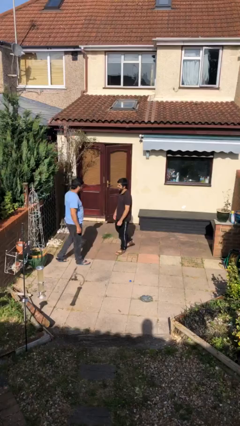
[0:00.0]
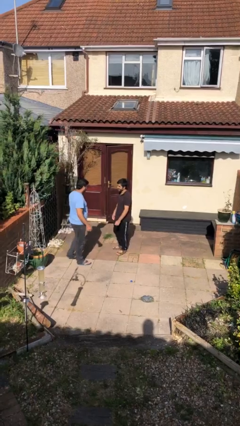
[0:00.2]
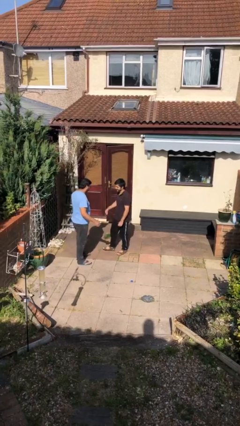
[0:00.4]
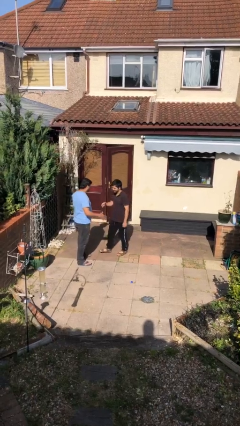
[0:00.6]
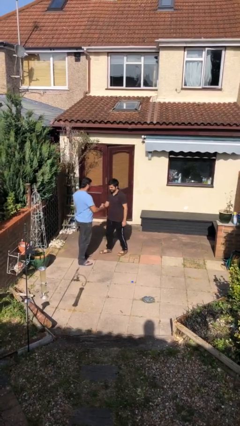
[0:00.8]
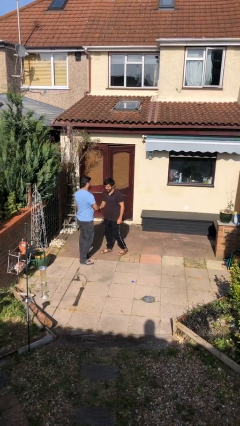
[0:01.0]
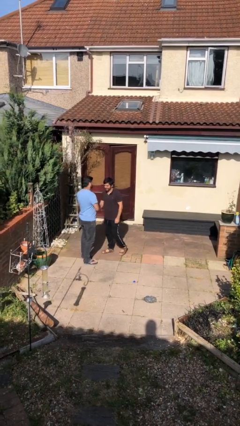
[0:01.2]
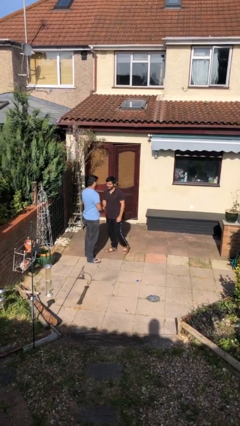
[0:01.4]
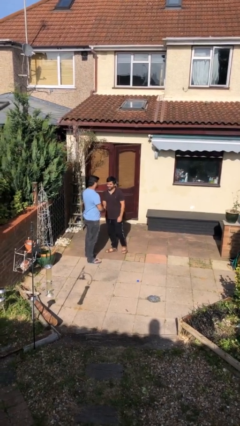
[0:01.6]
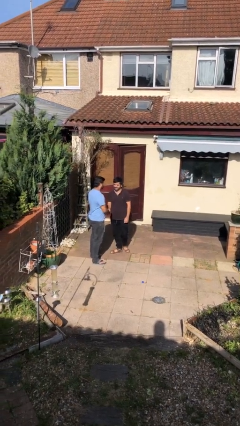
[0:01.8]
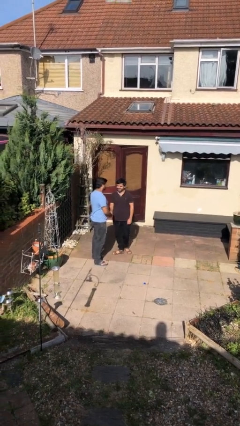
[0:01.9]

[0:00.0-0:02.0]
person shakes hand

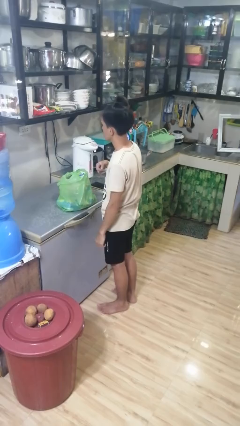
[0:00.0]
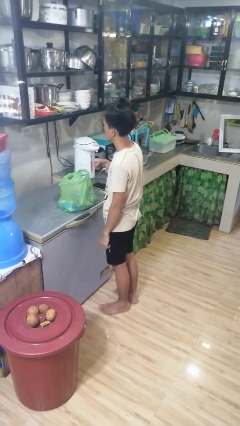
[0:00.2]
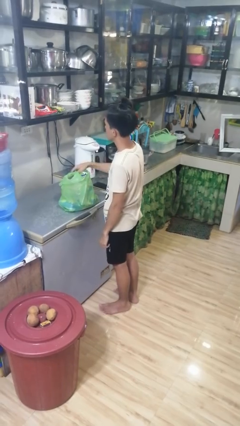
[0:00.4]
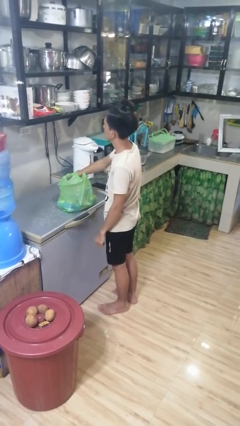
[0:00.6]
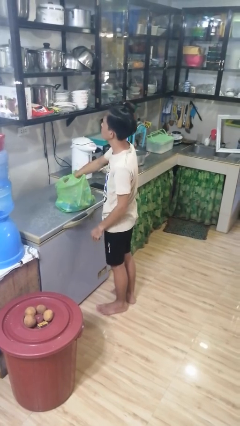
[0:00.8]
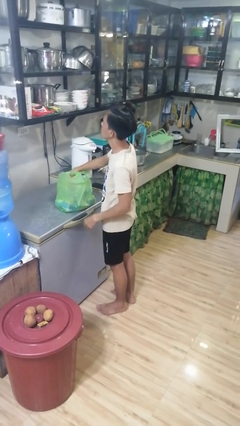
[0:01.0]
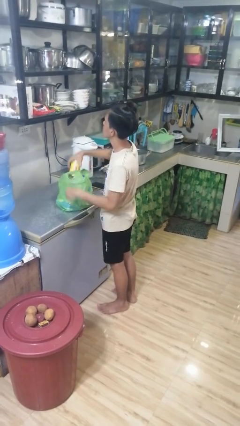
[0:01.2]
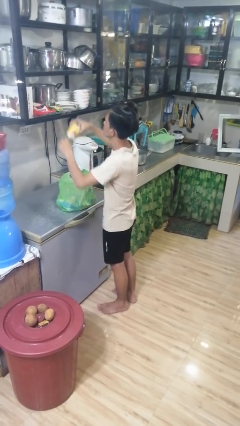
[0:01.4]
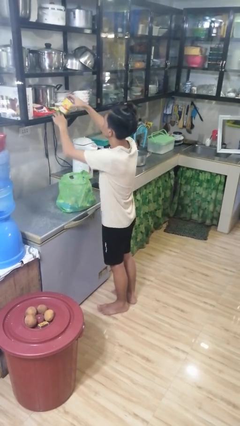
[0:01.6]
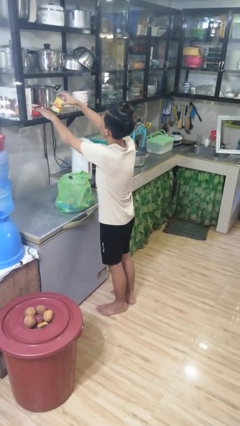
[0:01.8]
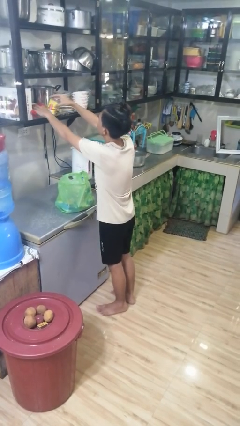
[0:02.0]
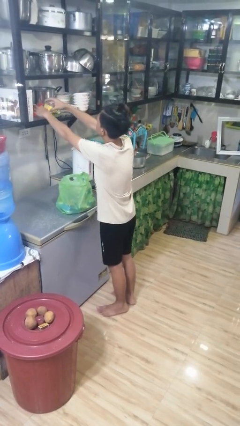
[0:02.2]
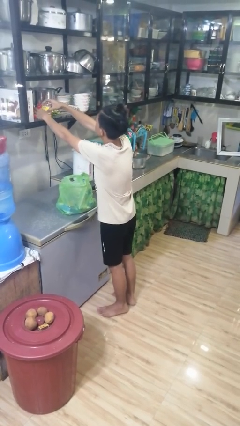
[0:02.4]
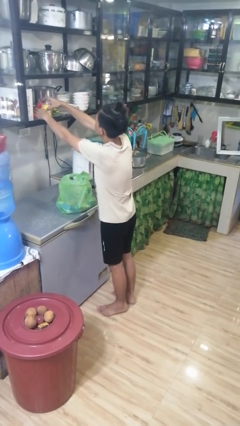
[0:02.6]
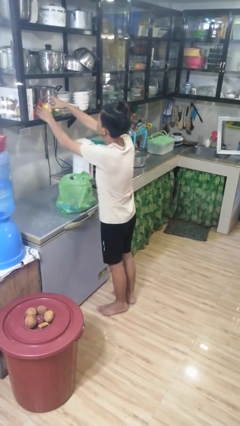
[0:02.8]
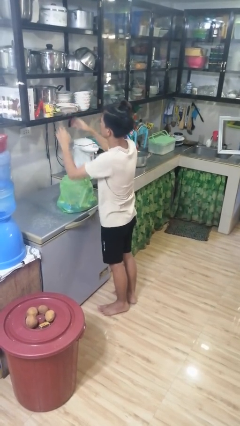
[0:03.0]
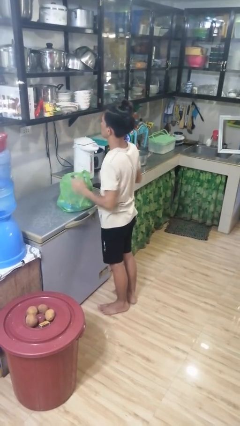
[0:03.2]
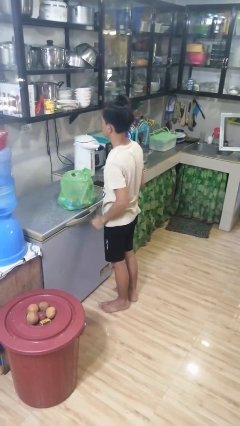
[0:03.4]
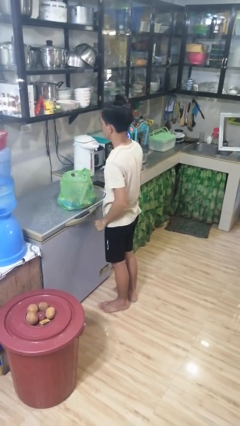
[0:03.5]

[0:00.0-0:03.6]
person loads groceries into cabinet

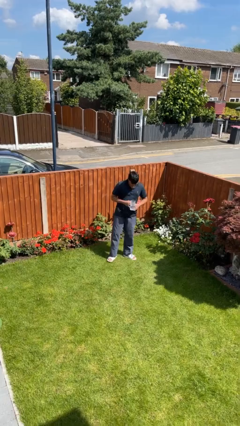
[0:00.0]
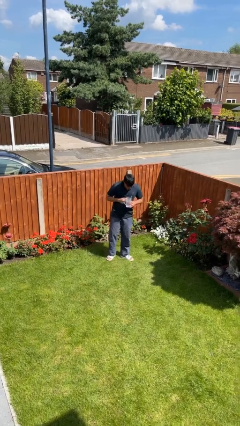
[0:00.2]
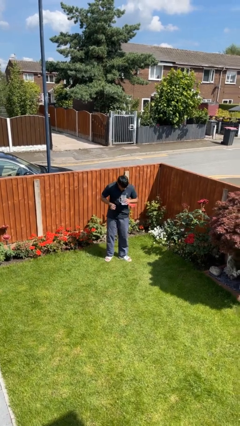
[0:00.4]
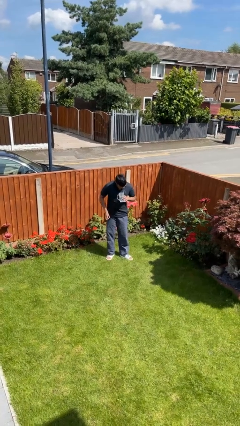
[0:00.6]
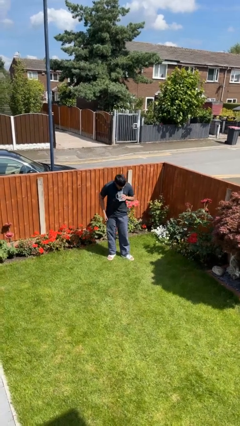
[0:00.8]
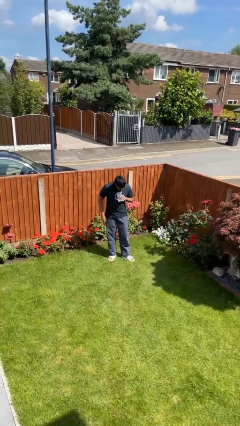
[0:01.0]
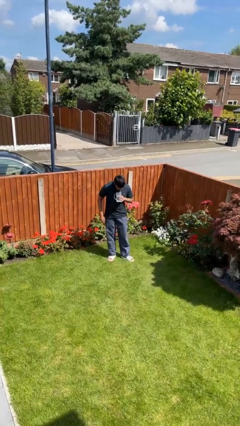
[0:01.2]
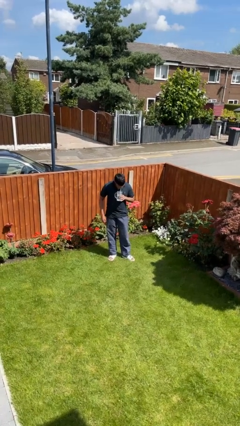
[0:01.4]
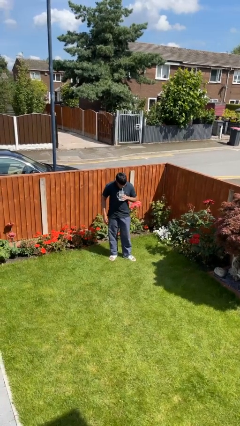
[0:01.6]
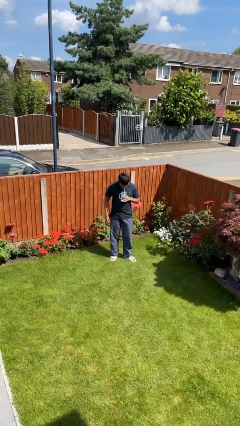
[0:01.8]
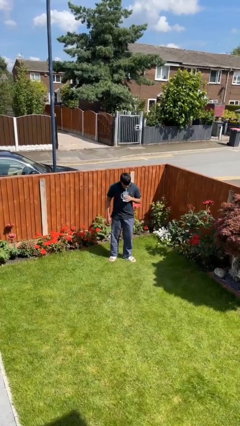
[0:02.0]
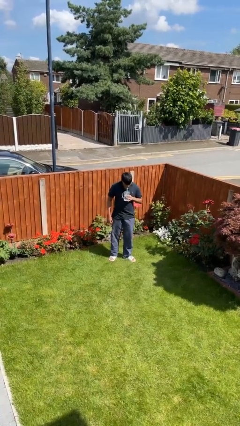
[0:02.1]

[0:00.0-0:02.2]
person drinks from straw

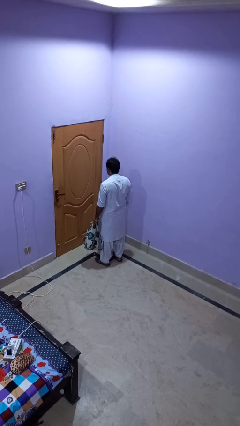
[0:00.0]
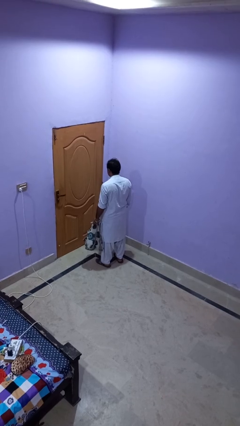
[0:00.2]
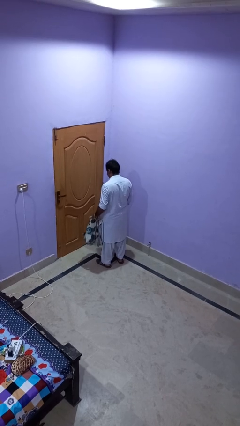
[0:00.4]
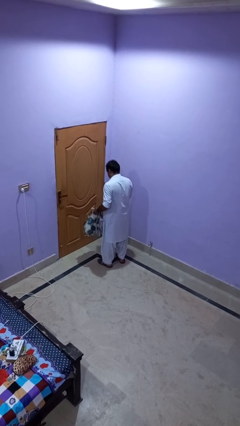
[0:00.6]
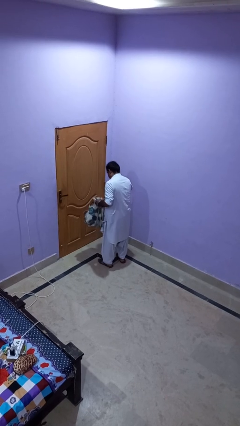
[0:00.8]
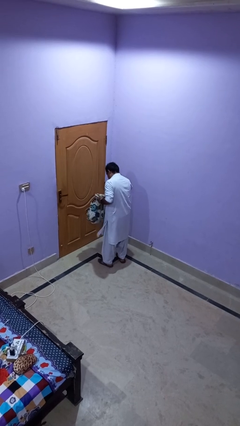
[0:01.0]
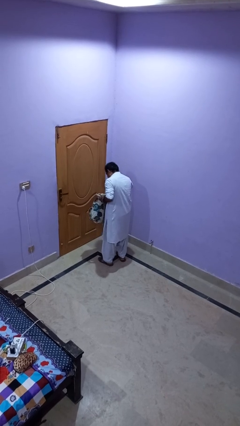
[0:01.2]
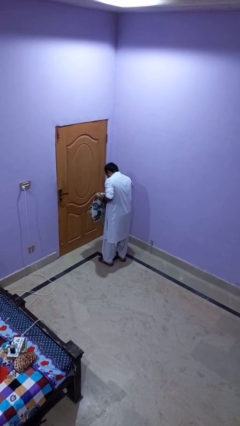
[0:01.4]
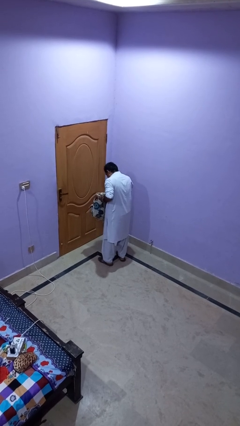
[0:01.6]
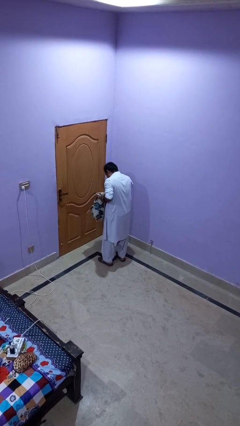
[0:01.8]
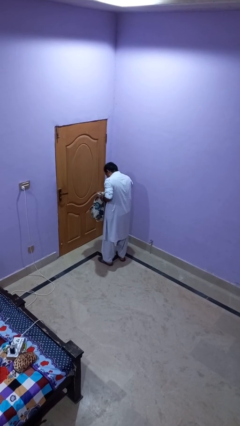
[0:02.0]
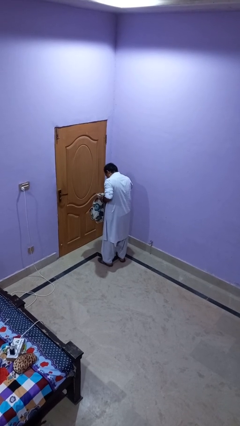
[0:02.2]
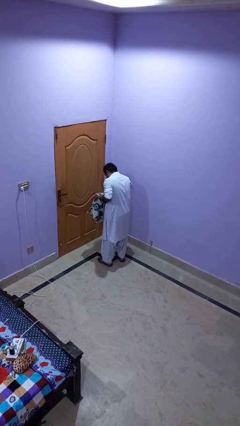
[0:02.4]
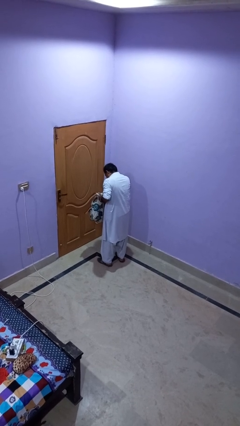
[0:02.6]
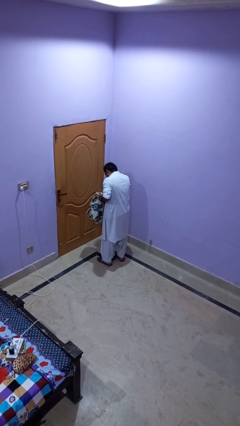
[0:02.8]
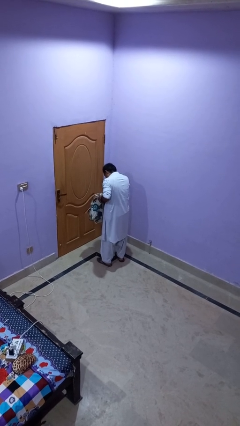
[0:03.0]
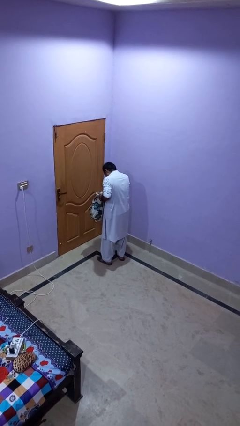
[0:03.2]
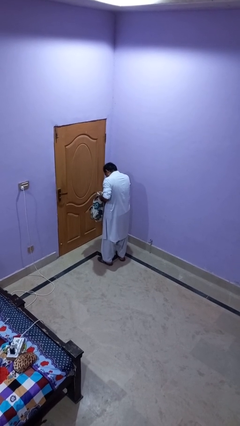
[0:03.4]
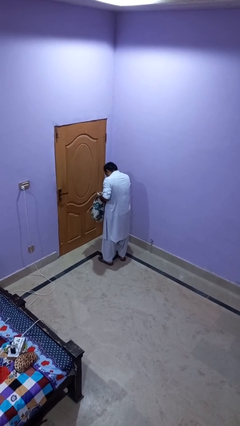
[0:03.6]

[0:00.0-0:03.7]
person searches in backpack

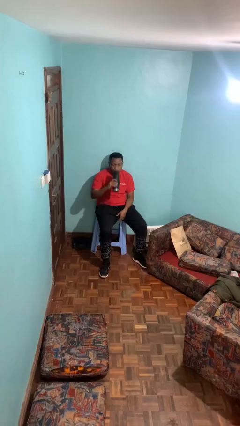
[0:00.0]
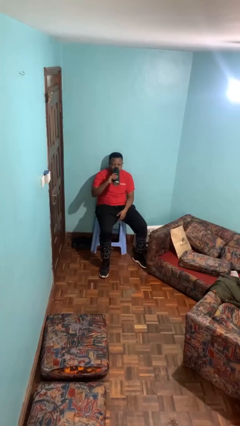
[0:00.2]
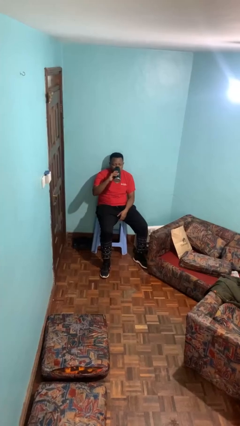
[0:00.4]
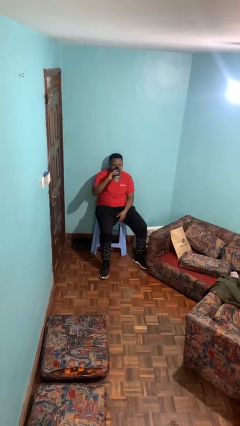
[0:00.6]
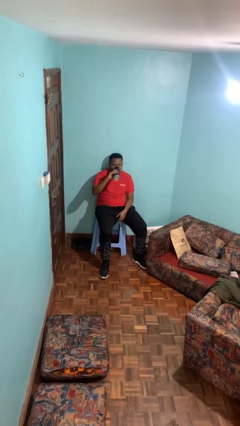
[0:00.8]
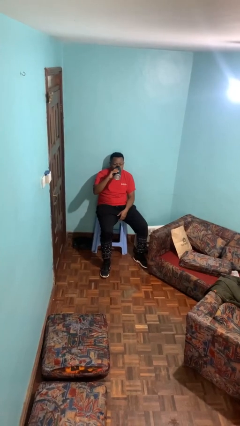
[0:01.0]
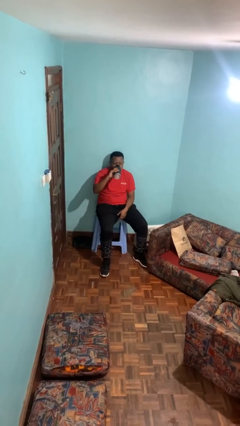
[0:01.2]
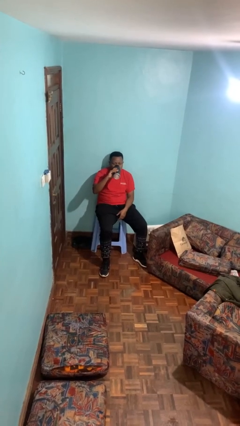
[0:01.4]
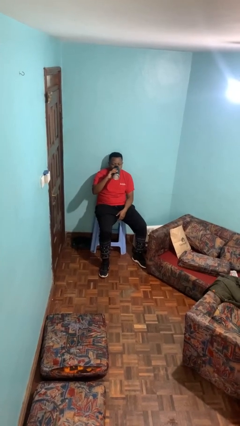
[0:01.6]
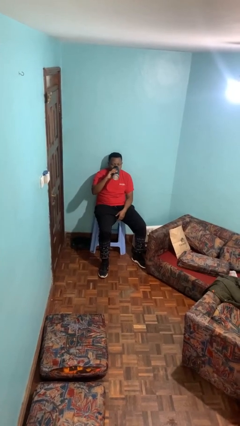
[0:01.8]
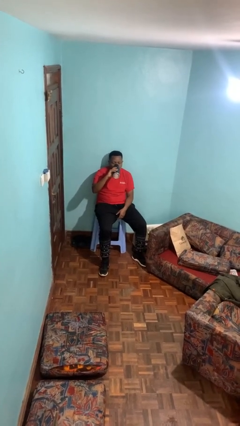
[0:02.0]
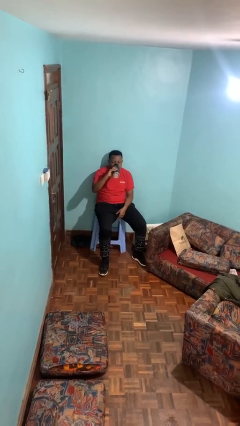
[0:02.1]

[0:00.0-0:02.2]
person drinks from bottle

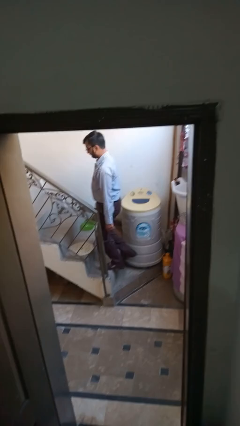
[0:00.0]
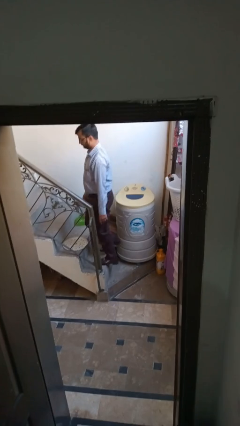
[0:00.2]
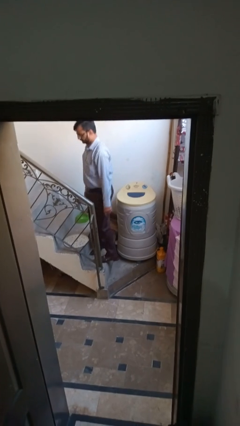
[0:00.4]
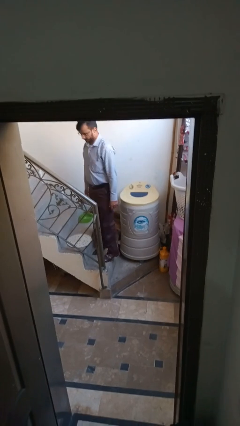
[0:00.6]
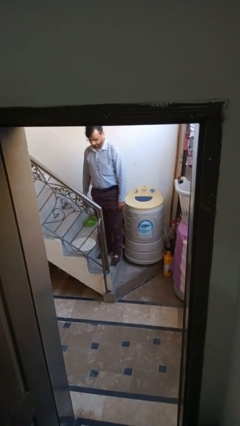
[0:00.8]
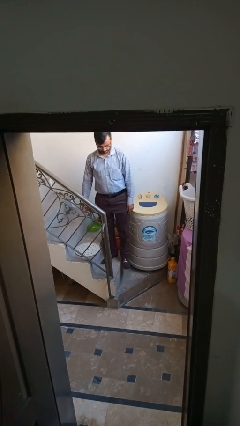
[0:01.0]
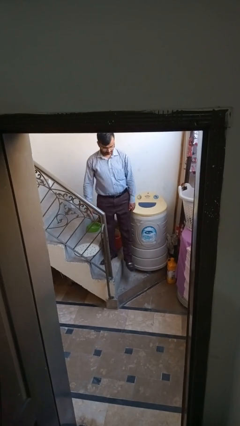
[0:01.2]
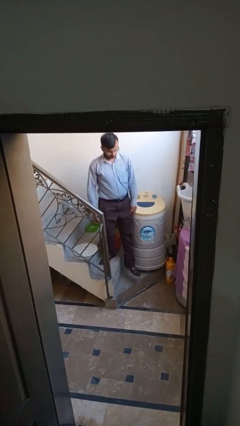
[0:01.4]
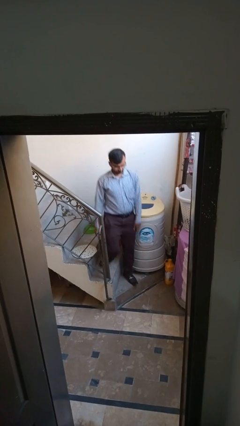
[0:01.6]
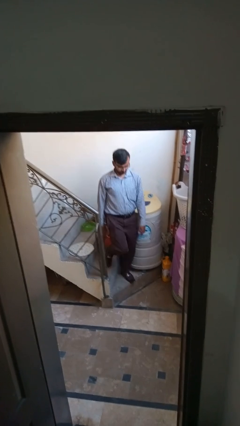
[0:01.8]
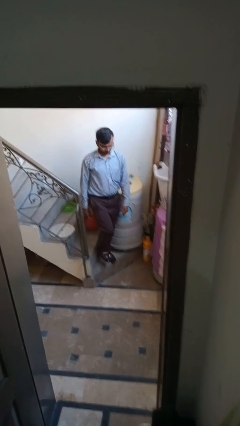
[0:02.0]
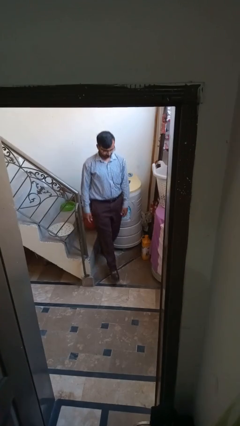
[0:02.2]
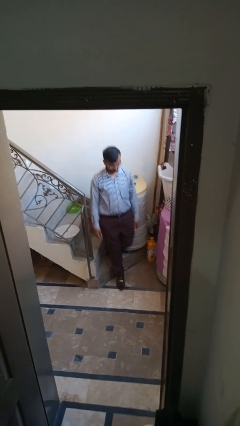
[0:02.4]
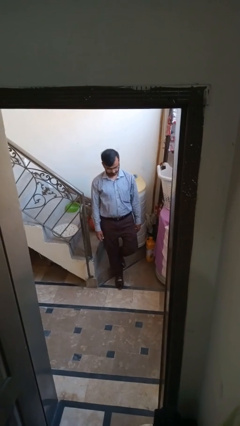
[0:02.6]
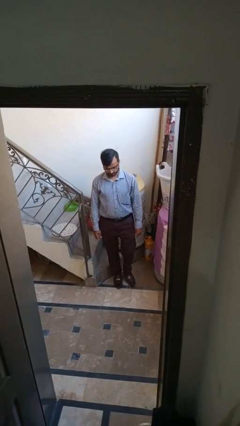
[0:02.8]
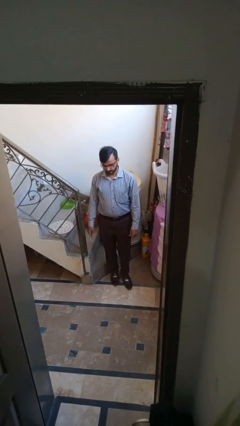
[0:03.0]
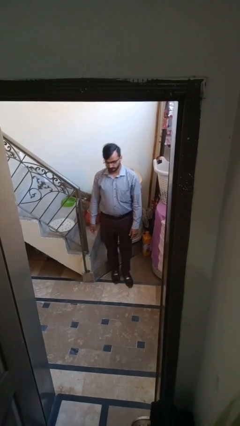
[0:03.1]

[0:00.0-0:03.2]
person climbs down stairs
